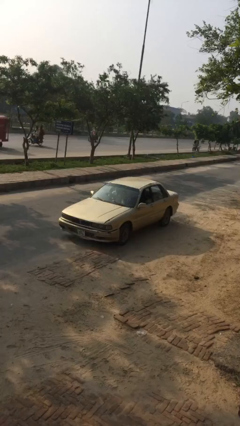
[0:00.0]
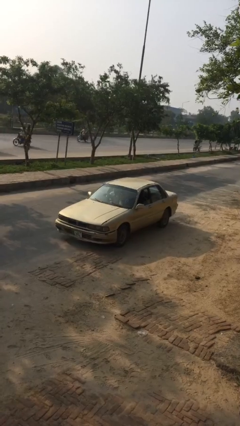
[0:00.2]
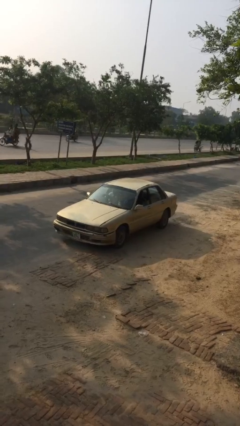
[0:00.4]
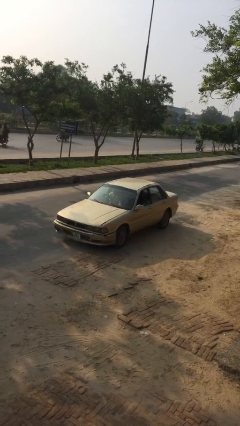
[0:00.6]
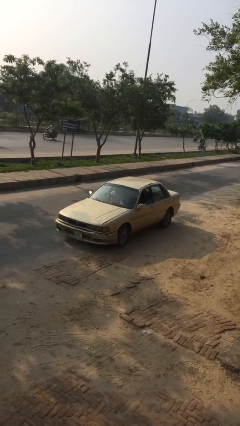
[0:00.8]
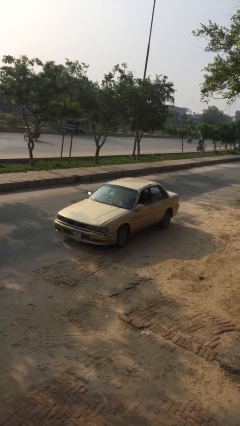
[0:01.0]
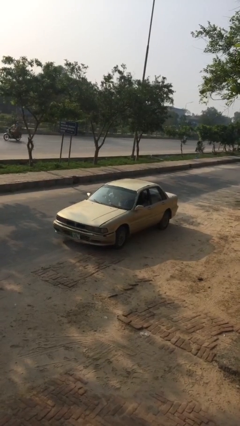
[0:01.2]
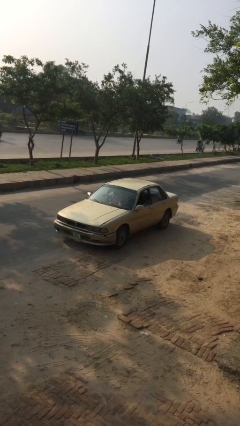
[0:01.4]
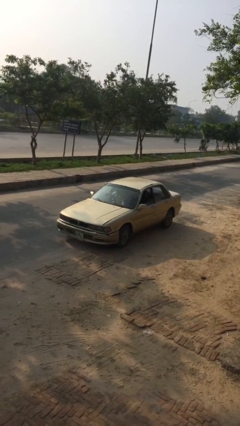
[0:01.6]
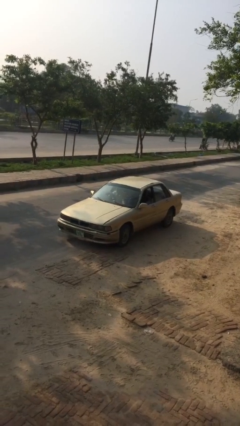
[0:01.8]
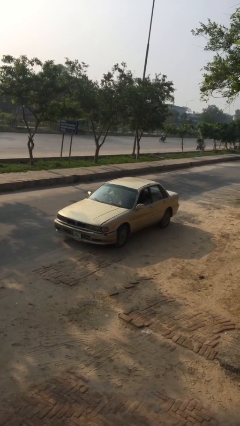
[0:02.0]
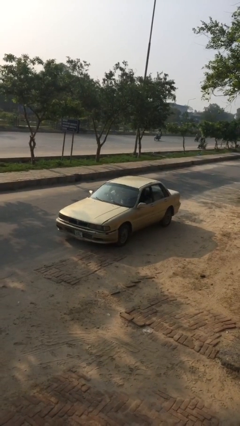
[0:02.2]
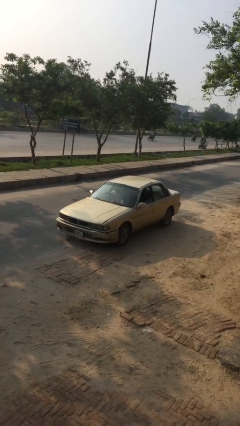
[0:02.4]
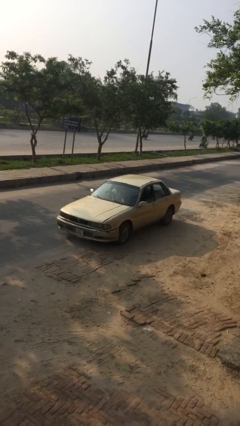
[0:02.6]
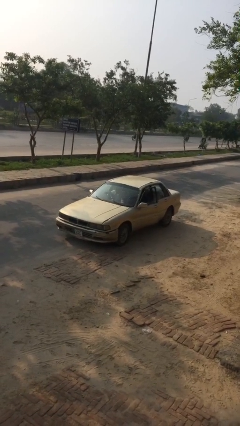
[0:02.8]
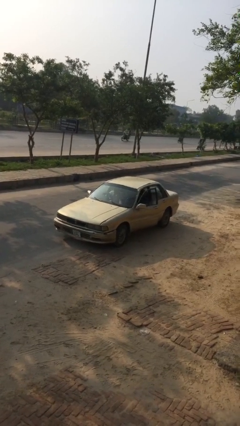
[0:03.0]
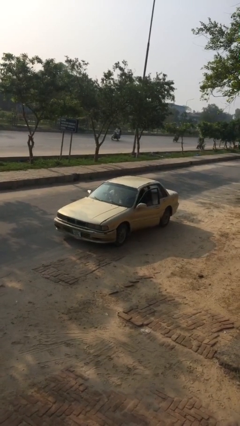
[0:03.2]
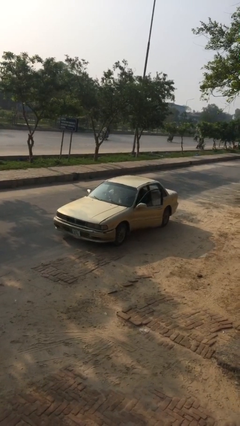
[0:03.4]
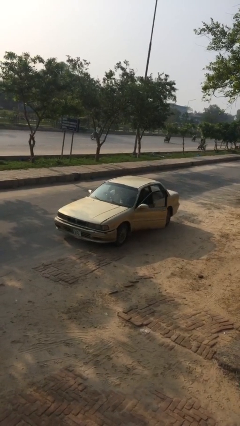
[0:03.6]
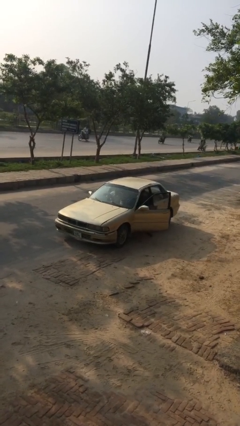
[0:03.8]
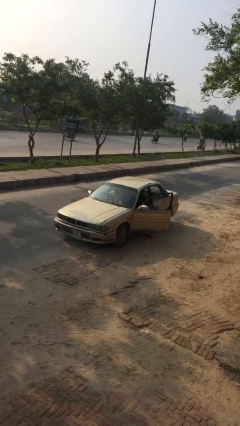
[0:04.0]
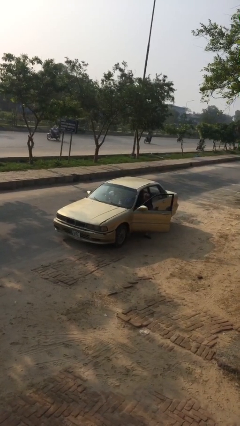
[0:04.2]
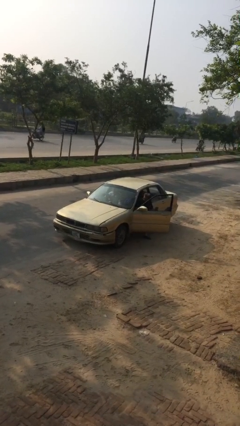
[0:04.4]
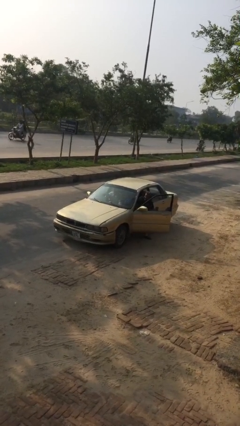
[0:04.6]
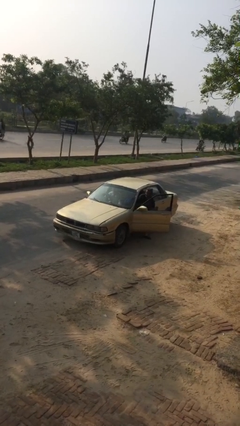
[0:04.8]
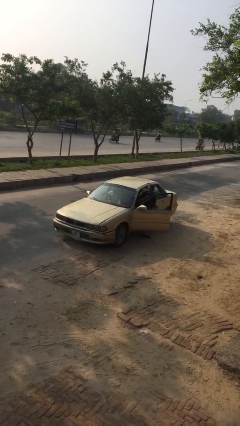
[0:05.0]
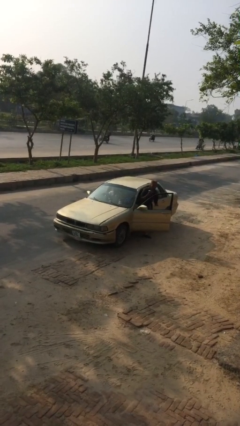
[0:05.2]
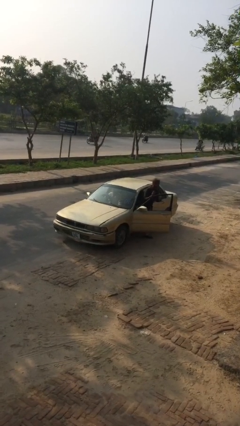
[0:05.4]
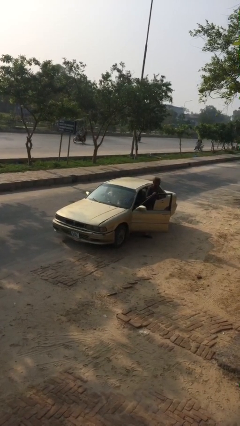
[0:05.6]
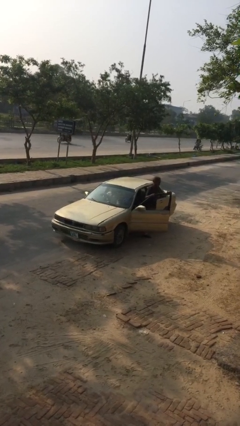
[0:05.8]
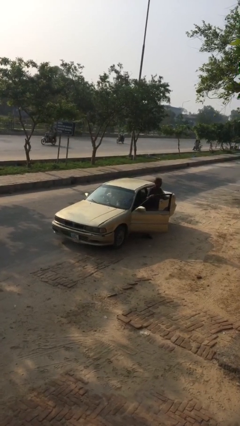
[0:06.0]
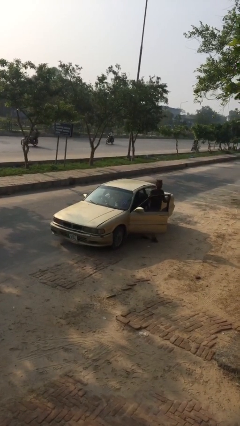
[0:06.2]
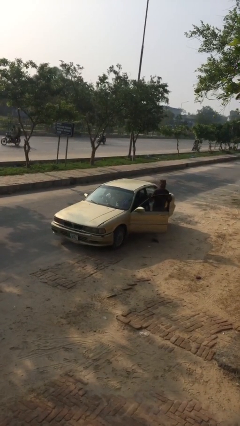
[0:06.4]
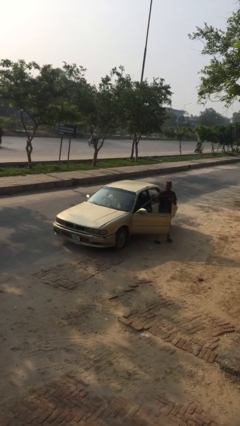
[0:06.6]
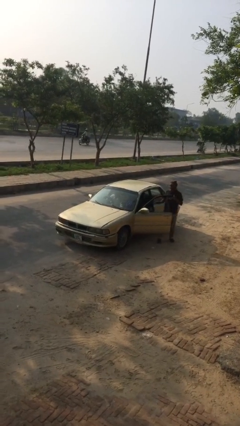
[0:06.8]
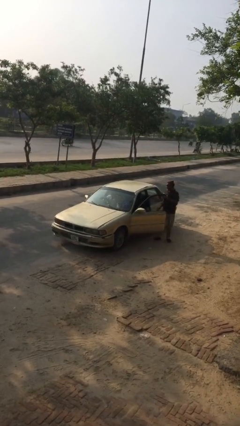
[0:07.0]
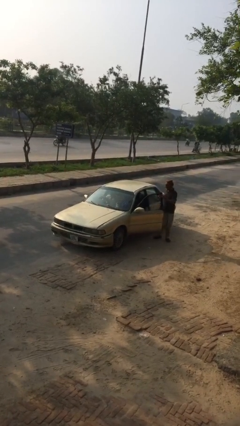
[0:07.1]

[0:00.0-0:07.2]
car drops off person

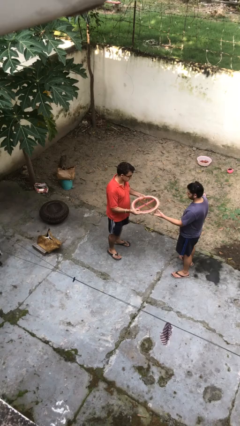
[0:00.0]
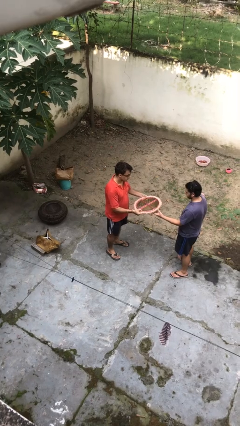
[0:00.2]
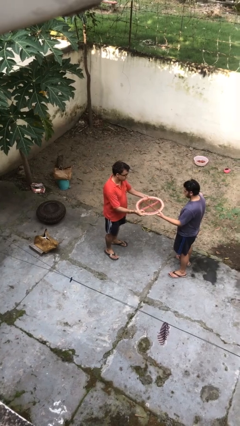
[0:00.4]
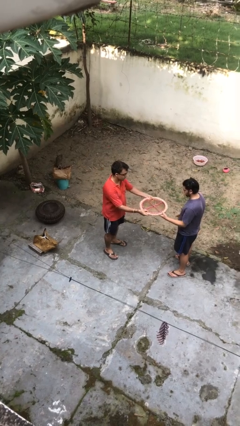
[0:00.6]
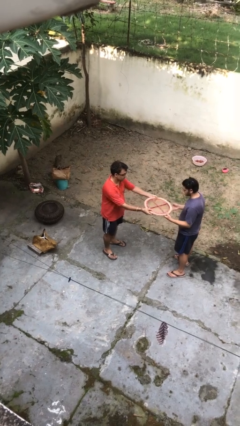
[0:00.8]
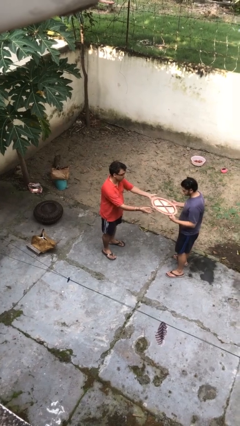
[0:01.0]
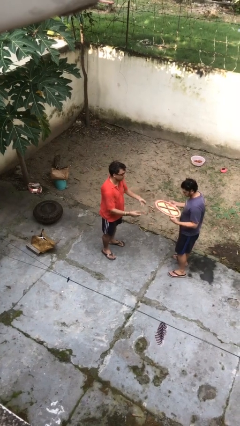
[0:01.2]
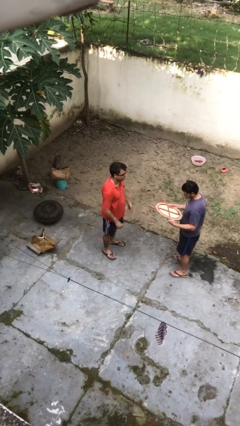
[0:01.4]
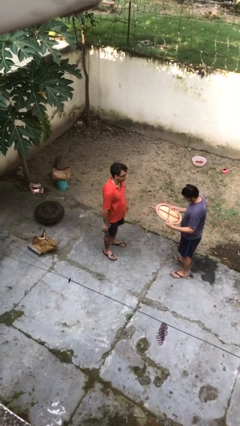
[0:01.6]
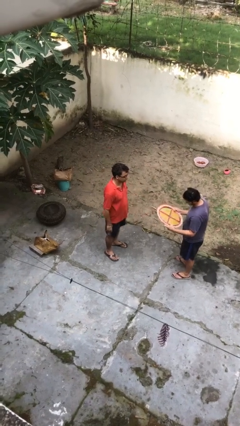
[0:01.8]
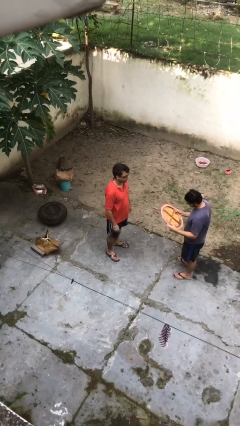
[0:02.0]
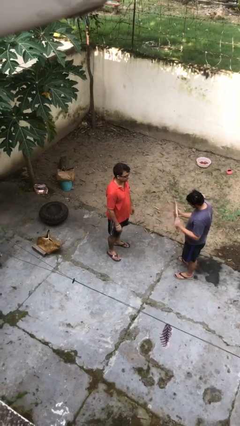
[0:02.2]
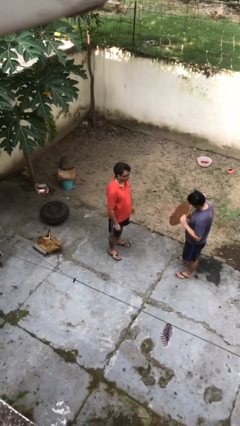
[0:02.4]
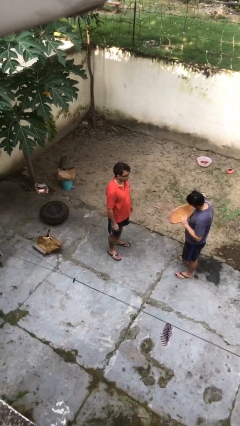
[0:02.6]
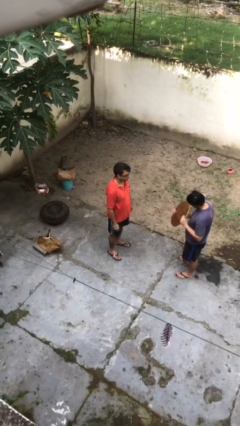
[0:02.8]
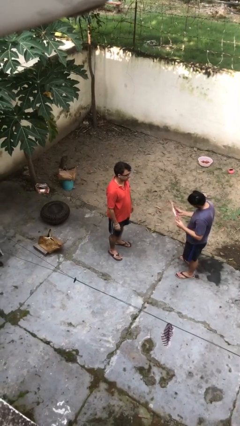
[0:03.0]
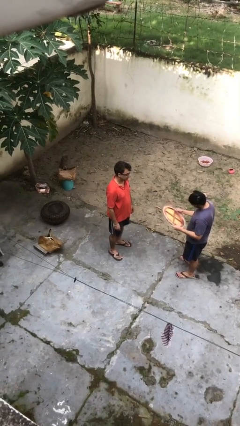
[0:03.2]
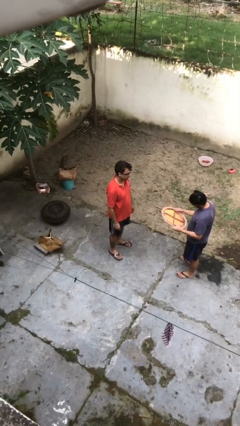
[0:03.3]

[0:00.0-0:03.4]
person transfers object to person

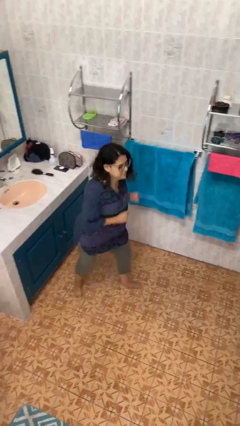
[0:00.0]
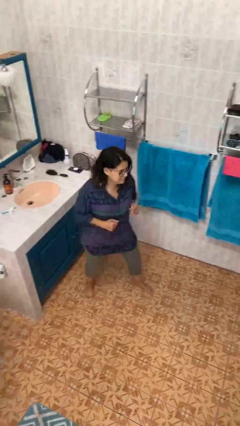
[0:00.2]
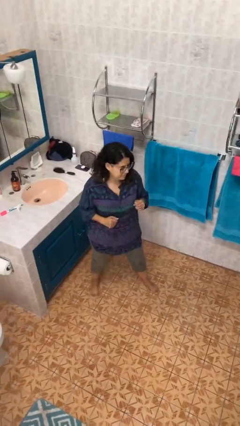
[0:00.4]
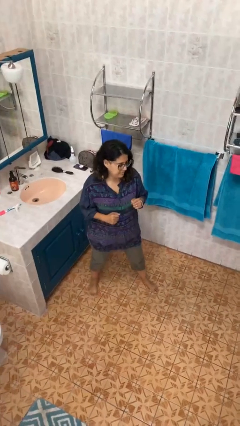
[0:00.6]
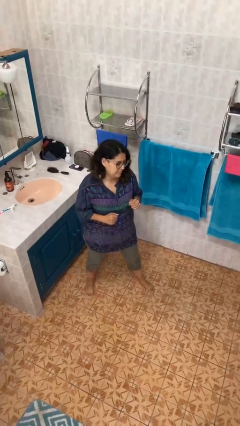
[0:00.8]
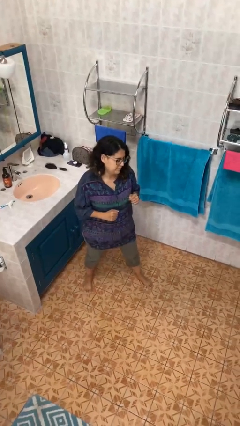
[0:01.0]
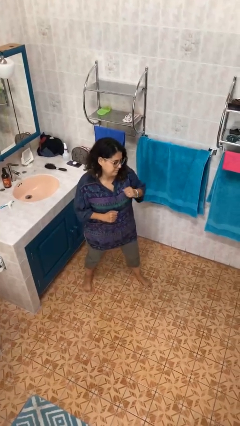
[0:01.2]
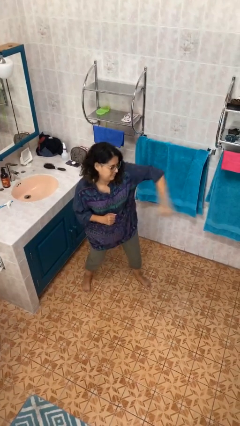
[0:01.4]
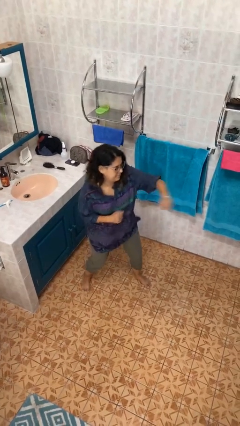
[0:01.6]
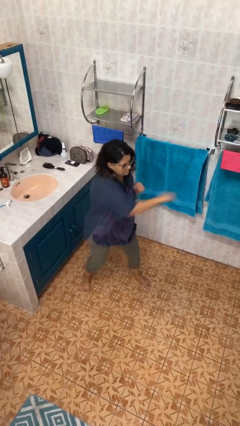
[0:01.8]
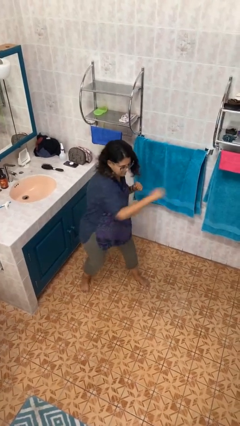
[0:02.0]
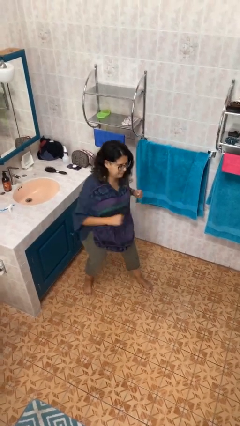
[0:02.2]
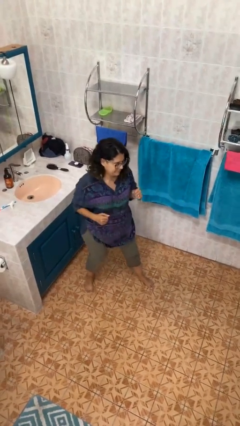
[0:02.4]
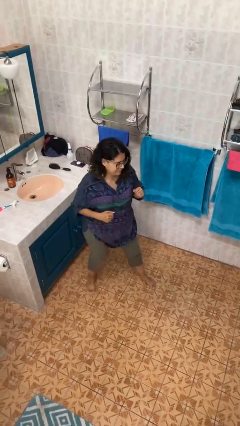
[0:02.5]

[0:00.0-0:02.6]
person karate chop

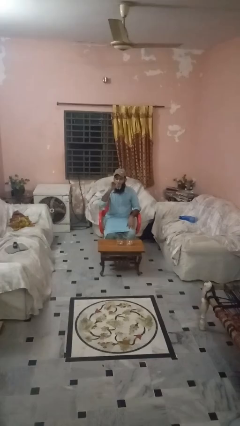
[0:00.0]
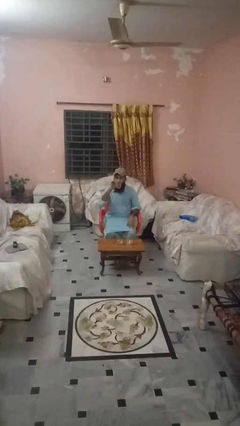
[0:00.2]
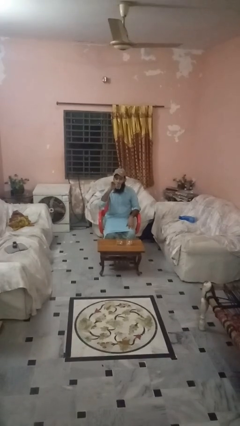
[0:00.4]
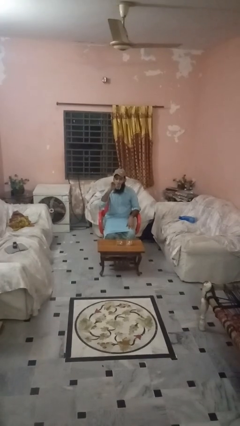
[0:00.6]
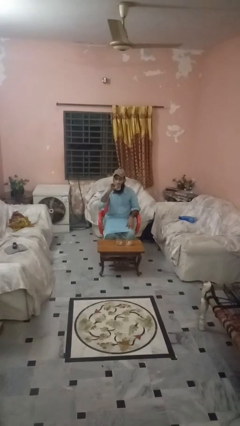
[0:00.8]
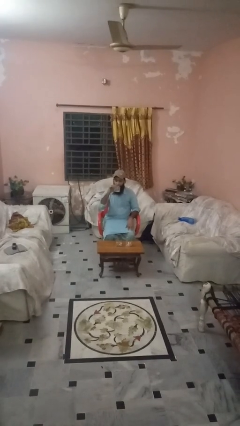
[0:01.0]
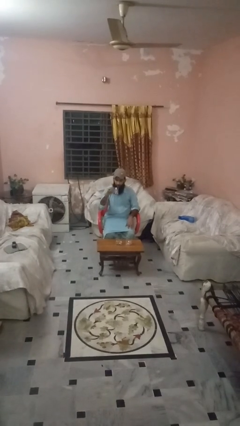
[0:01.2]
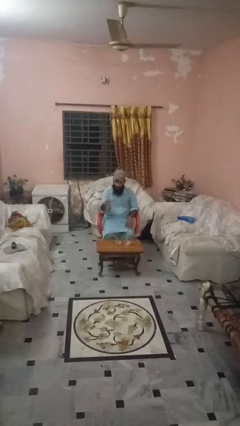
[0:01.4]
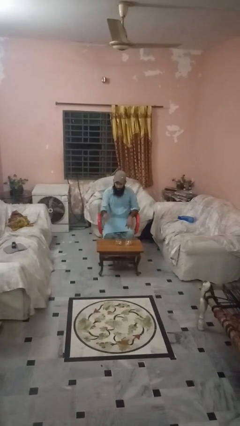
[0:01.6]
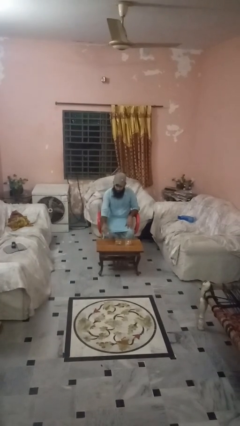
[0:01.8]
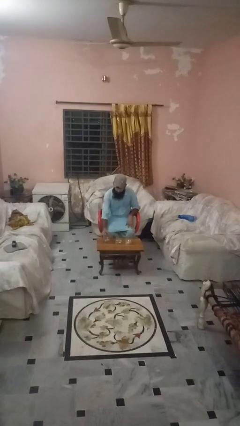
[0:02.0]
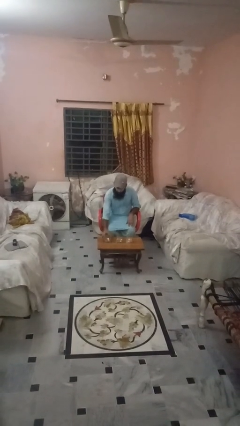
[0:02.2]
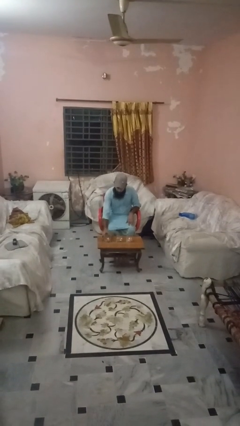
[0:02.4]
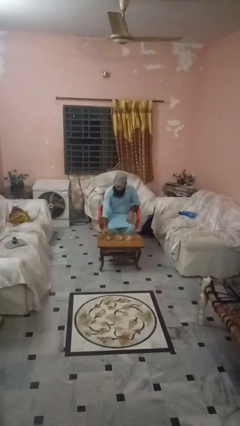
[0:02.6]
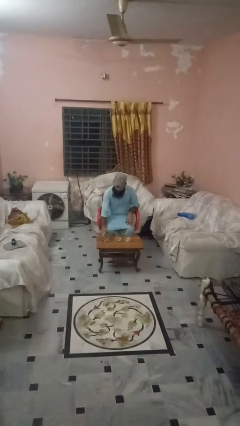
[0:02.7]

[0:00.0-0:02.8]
person puts down object on table

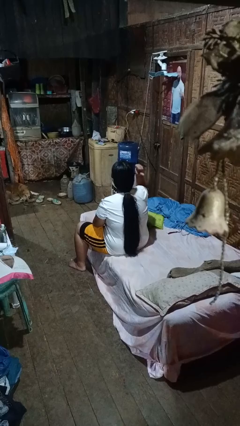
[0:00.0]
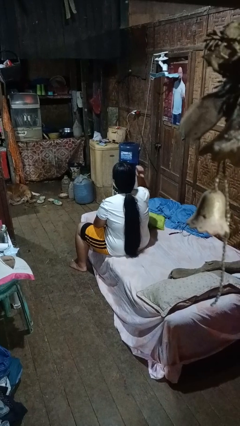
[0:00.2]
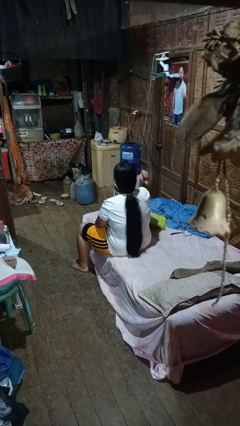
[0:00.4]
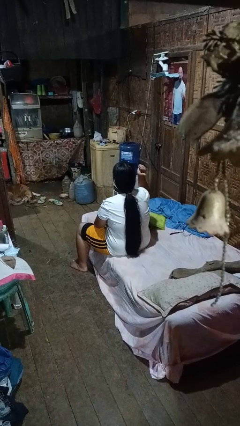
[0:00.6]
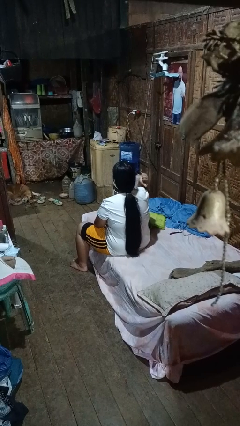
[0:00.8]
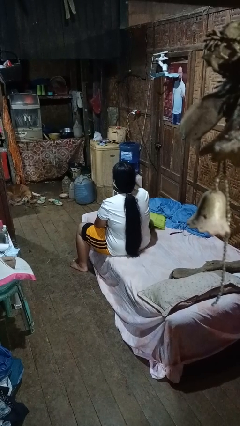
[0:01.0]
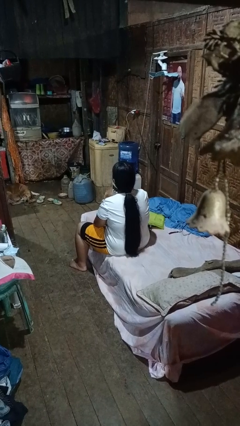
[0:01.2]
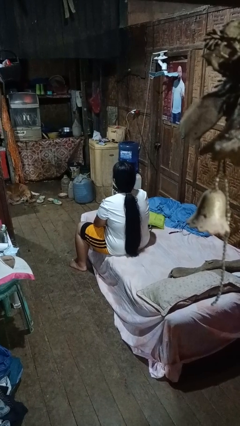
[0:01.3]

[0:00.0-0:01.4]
person gestures behind me
